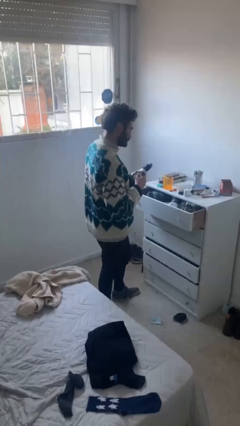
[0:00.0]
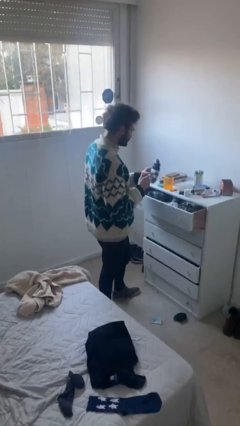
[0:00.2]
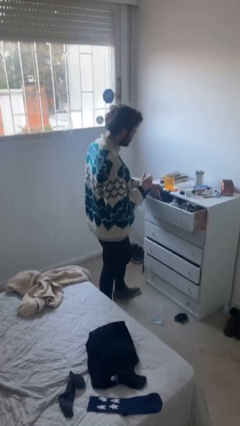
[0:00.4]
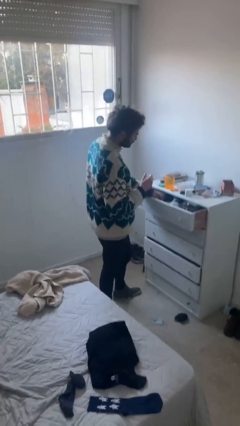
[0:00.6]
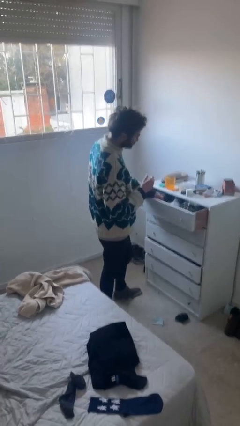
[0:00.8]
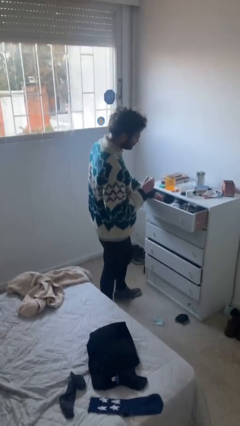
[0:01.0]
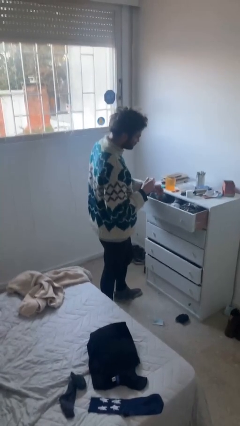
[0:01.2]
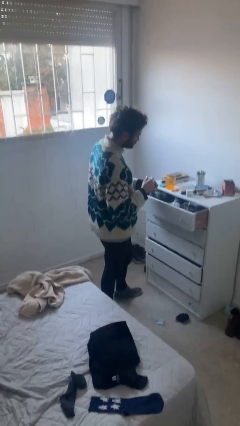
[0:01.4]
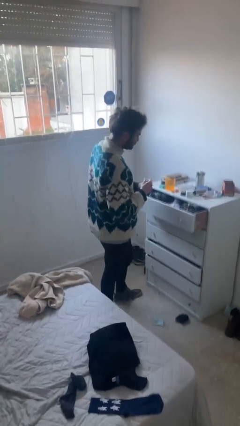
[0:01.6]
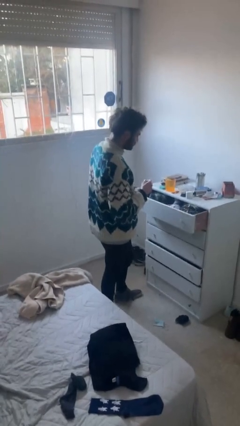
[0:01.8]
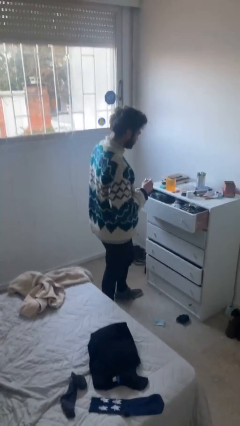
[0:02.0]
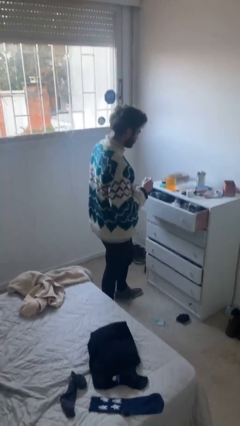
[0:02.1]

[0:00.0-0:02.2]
person puts clothes into dresser

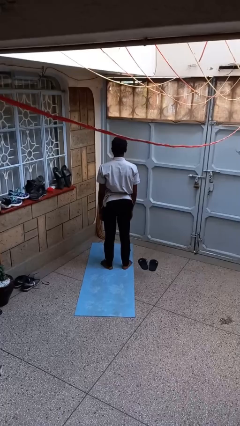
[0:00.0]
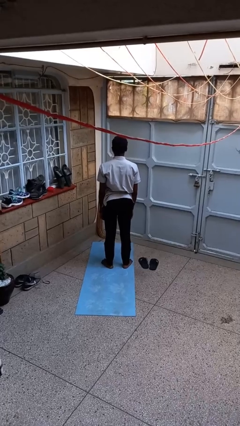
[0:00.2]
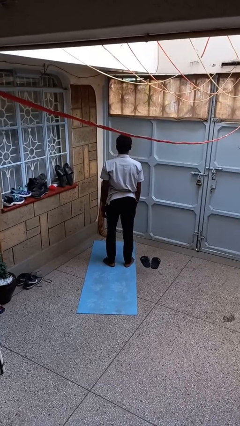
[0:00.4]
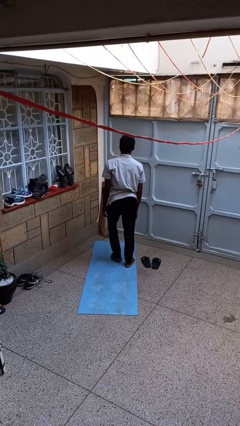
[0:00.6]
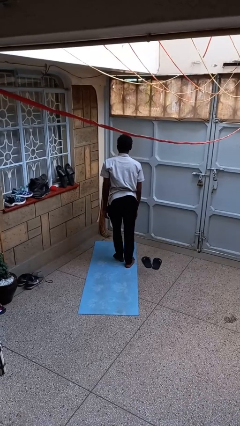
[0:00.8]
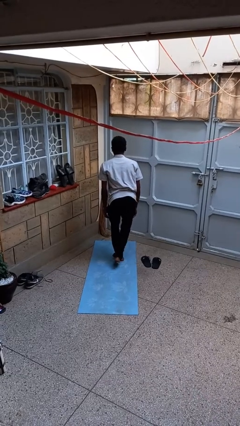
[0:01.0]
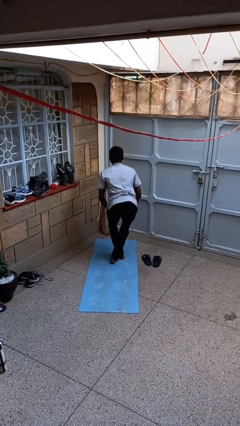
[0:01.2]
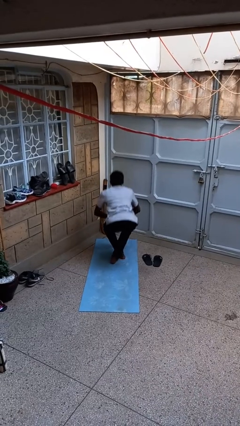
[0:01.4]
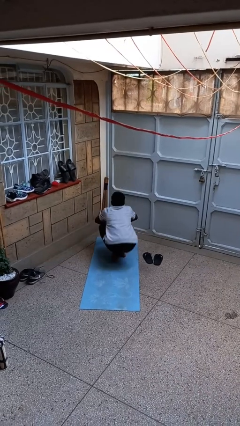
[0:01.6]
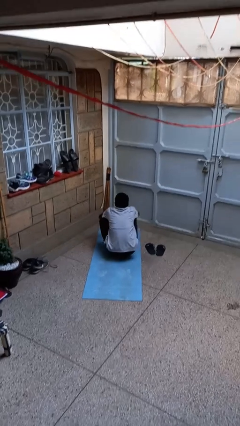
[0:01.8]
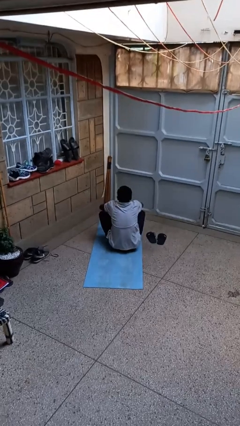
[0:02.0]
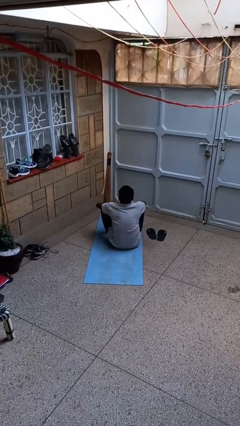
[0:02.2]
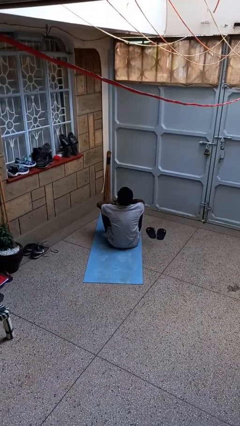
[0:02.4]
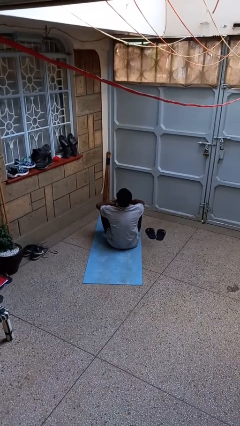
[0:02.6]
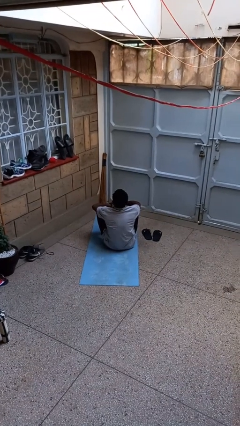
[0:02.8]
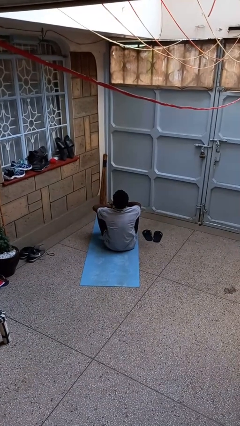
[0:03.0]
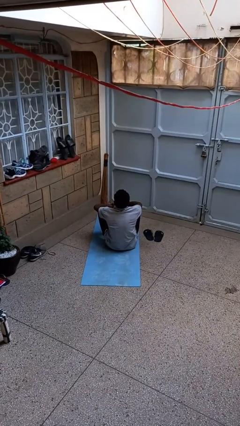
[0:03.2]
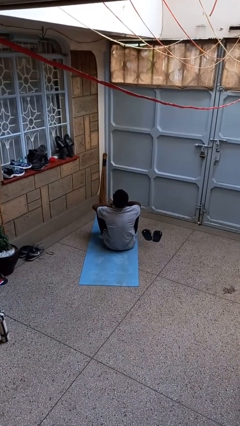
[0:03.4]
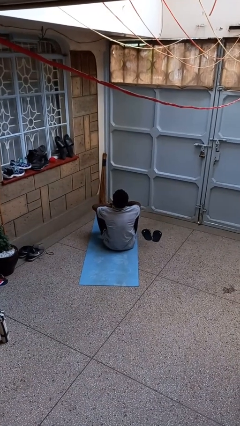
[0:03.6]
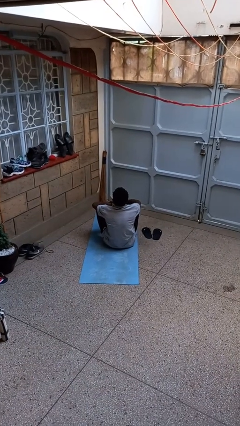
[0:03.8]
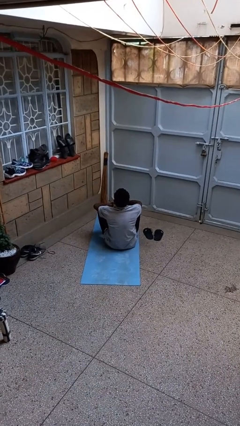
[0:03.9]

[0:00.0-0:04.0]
person sits crisscross

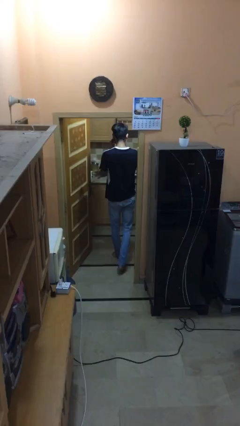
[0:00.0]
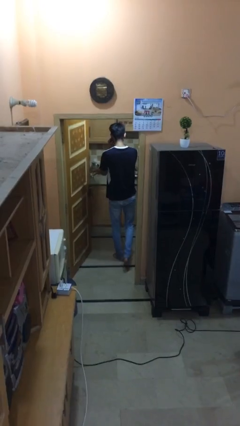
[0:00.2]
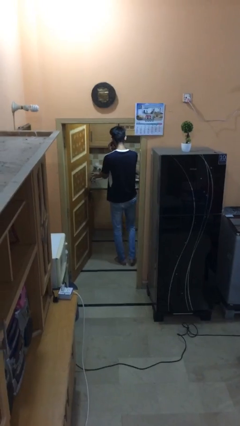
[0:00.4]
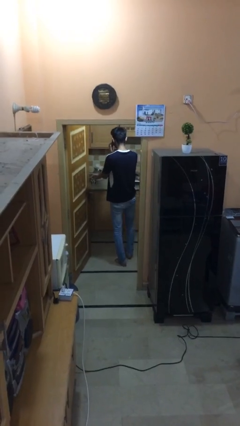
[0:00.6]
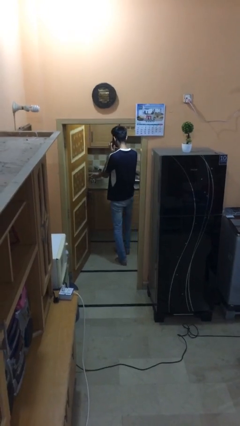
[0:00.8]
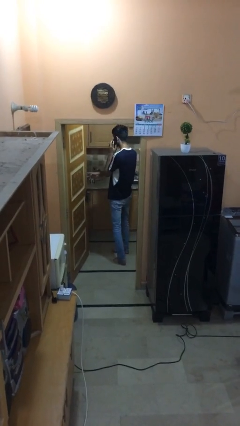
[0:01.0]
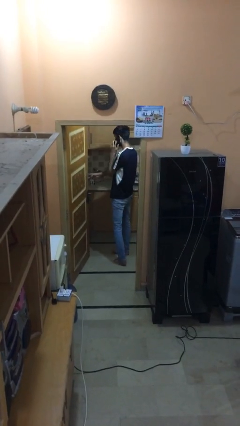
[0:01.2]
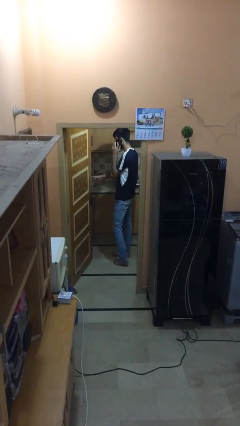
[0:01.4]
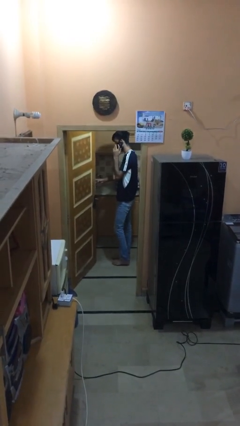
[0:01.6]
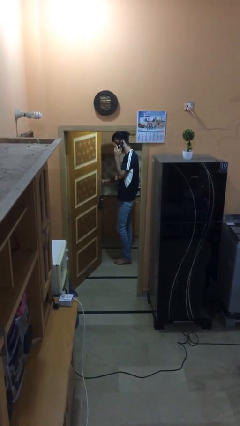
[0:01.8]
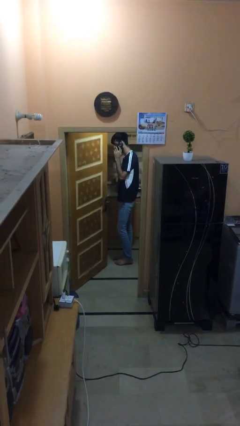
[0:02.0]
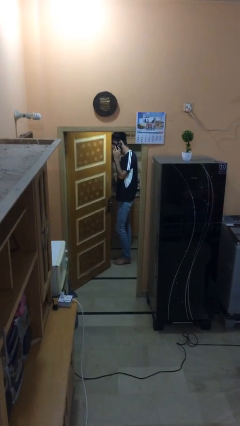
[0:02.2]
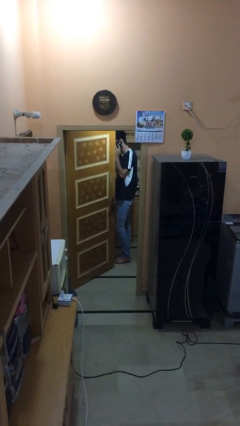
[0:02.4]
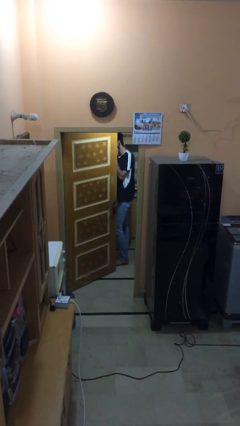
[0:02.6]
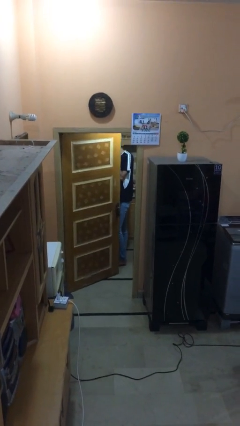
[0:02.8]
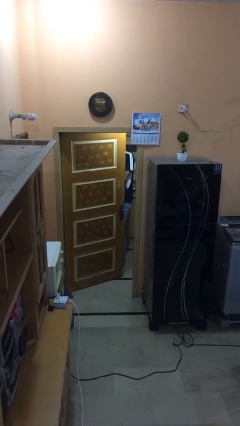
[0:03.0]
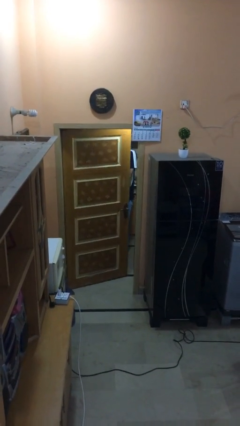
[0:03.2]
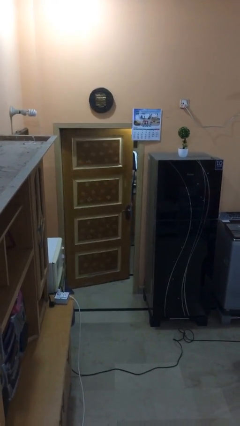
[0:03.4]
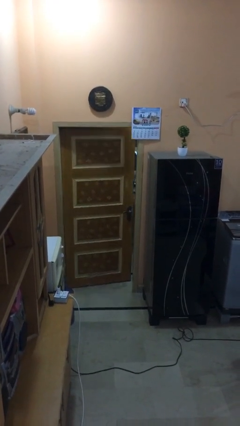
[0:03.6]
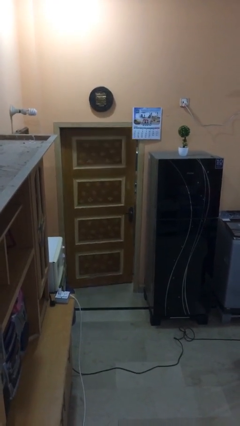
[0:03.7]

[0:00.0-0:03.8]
person closes facility door

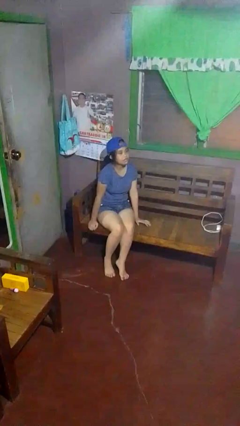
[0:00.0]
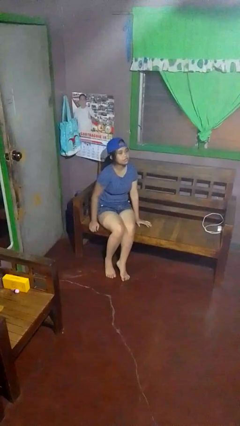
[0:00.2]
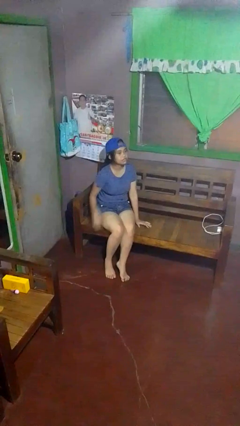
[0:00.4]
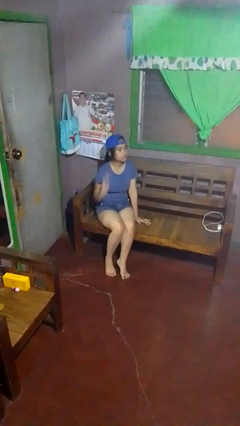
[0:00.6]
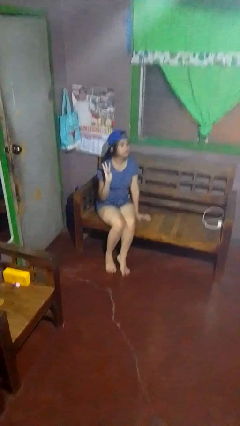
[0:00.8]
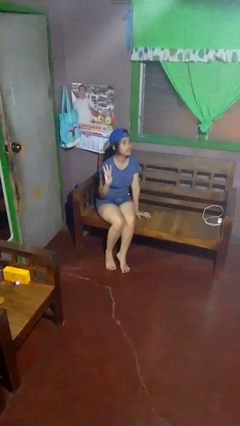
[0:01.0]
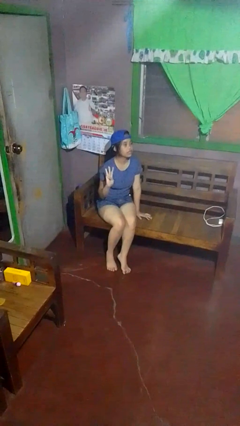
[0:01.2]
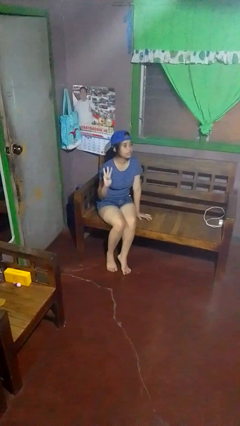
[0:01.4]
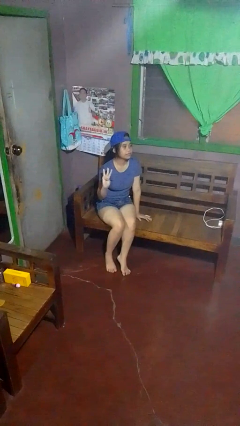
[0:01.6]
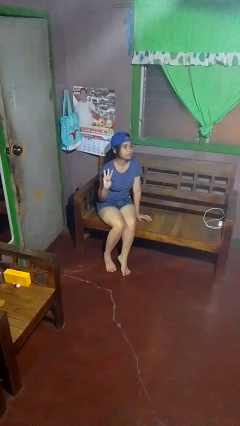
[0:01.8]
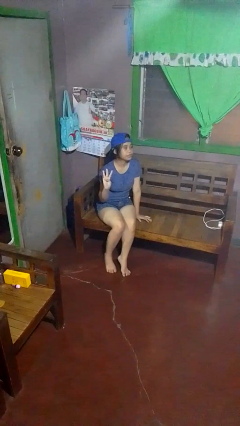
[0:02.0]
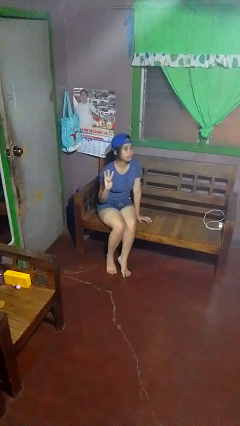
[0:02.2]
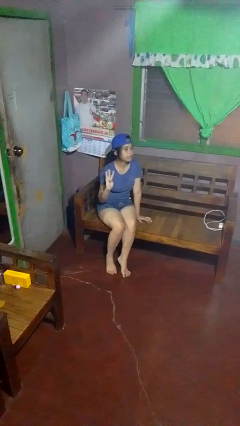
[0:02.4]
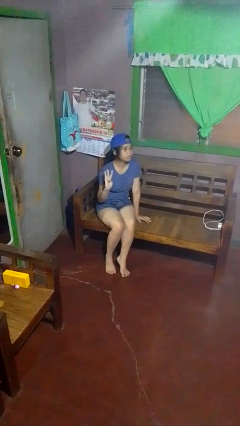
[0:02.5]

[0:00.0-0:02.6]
person gestures number three

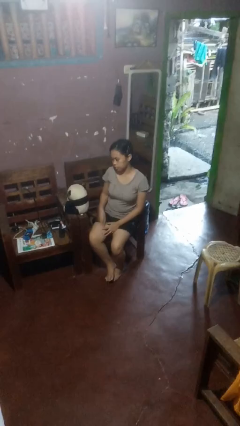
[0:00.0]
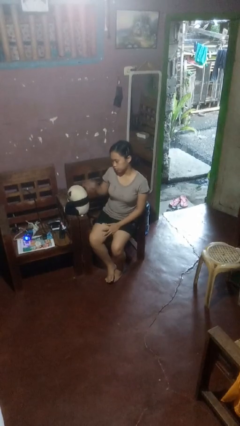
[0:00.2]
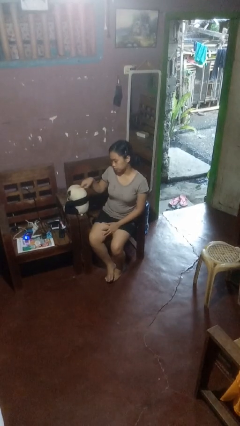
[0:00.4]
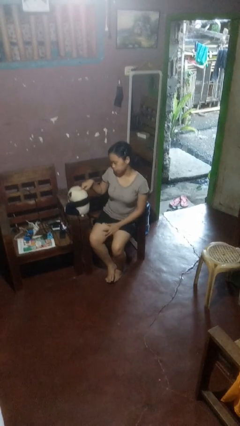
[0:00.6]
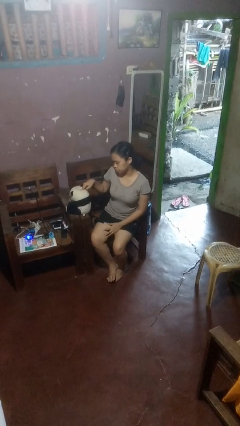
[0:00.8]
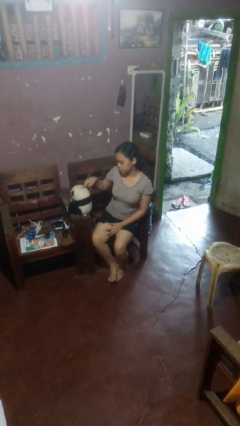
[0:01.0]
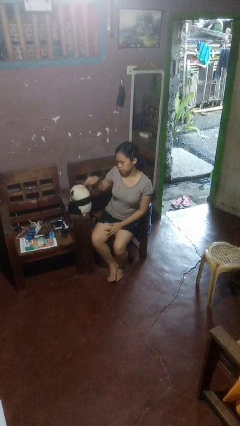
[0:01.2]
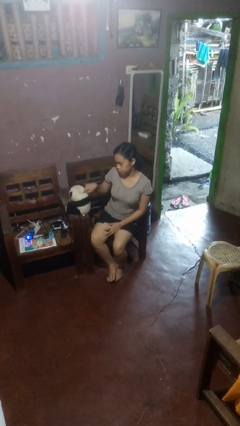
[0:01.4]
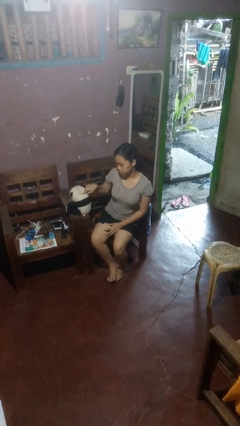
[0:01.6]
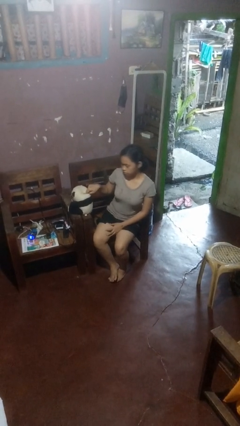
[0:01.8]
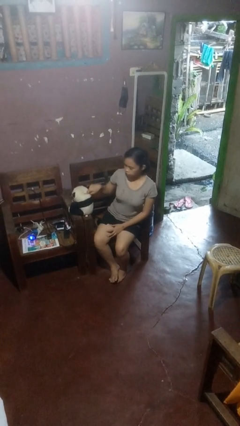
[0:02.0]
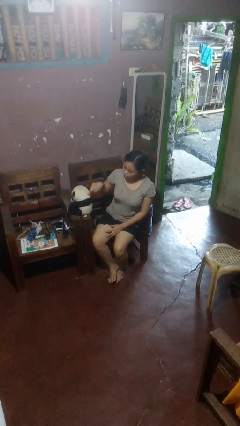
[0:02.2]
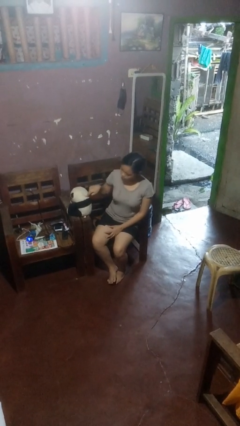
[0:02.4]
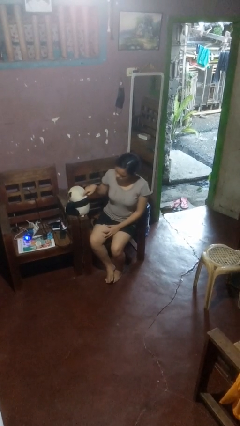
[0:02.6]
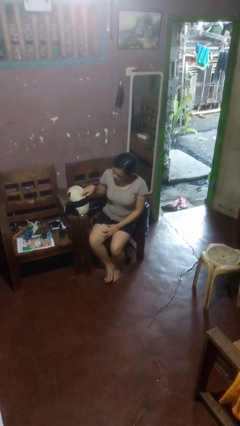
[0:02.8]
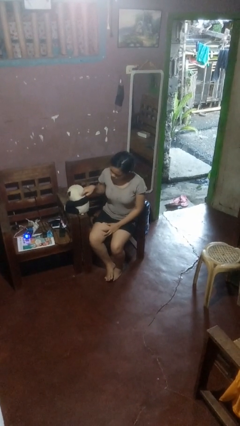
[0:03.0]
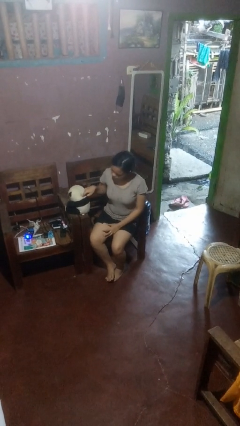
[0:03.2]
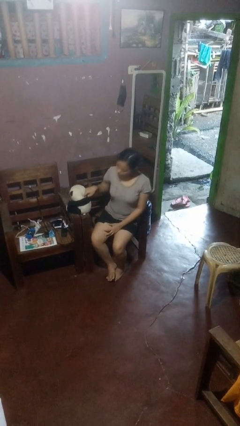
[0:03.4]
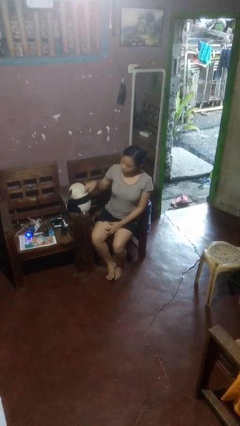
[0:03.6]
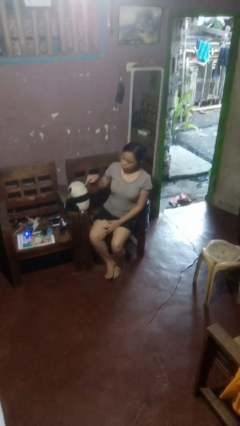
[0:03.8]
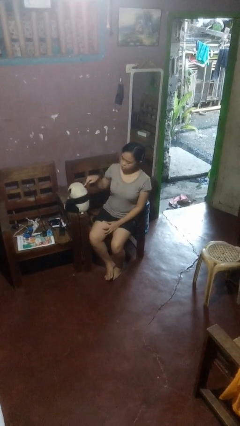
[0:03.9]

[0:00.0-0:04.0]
person taps object with finger

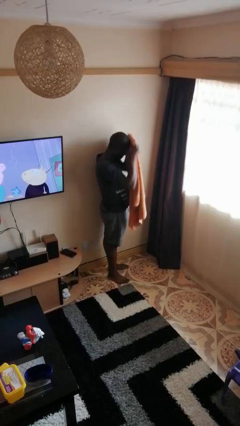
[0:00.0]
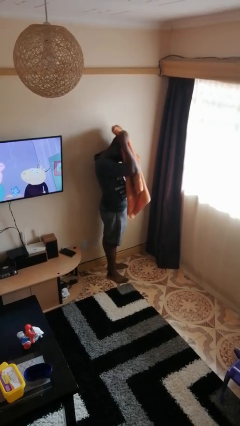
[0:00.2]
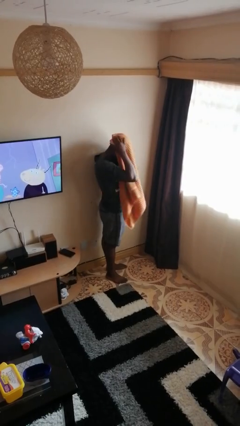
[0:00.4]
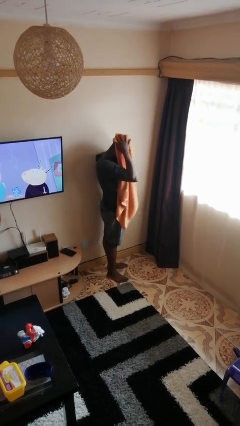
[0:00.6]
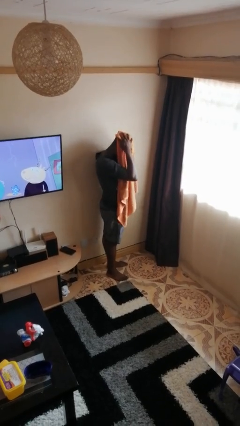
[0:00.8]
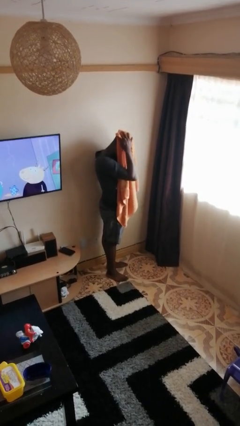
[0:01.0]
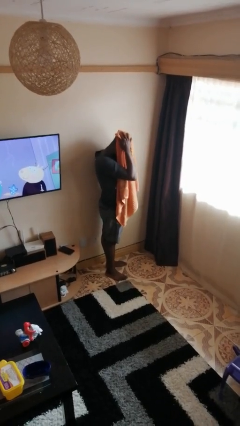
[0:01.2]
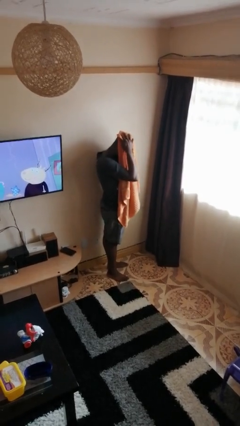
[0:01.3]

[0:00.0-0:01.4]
person dries hair with towel
